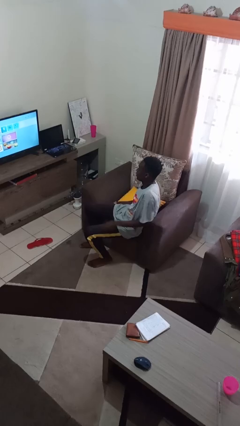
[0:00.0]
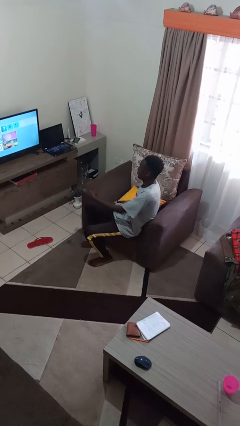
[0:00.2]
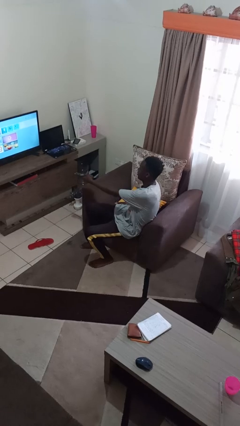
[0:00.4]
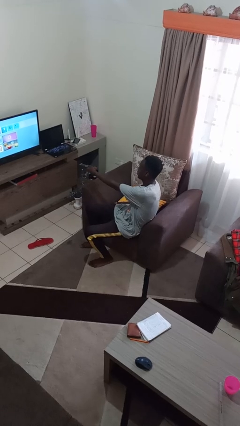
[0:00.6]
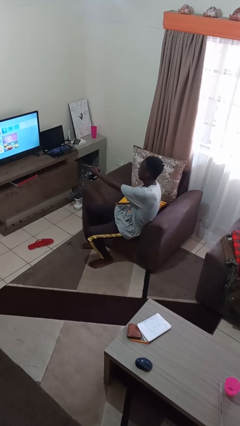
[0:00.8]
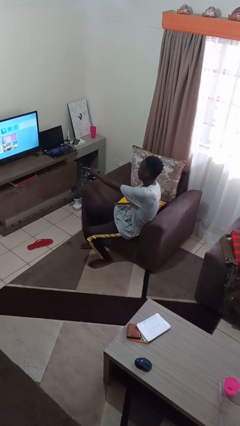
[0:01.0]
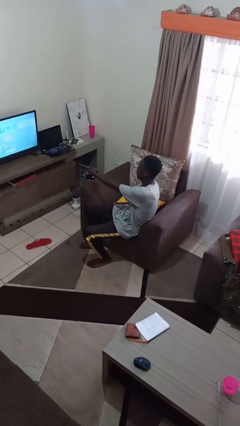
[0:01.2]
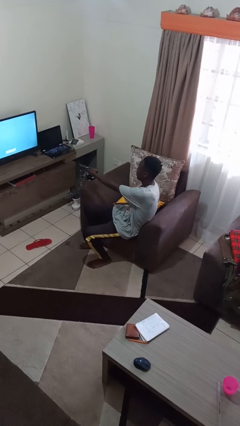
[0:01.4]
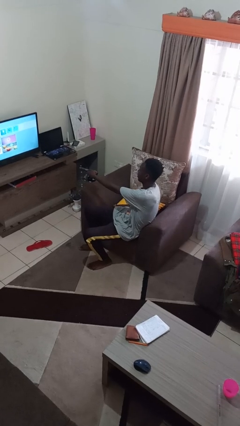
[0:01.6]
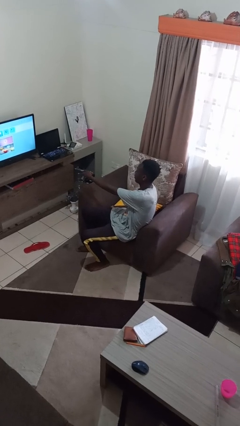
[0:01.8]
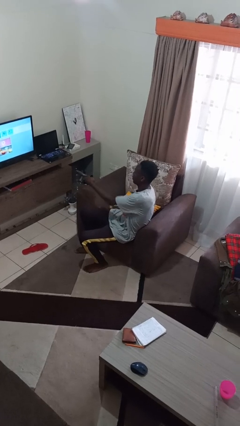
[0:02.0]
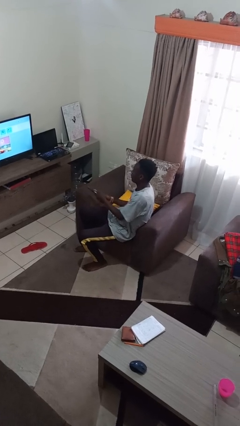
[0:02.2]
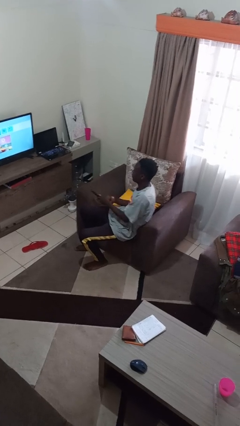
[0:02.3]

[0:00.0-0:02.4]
person uses television remote

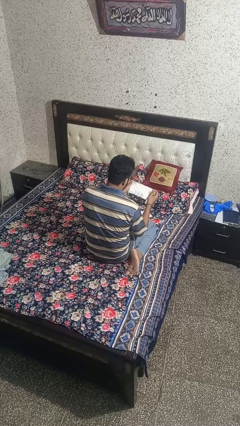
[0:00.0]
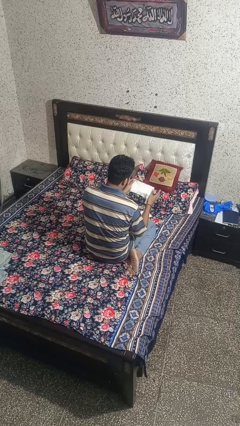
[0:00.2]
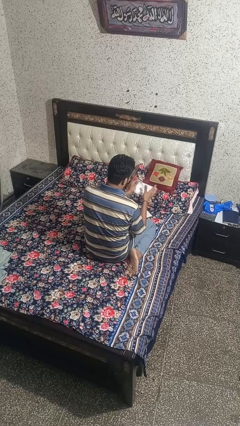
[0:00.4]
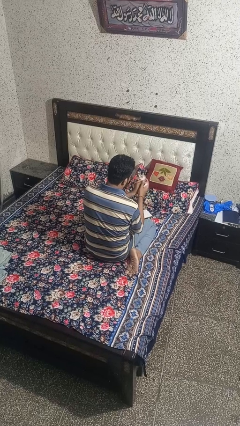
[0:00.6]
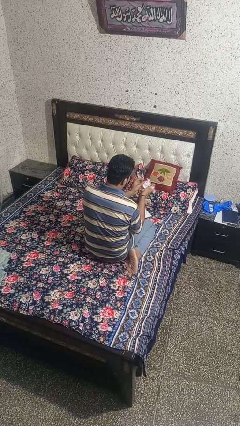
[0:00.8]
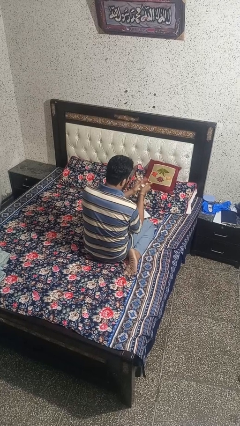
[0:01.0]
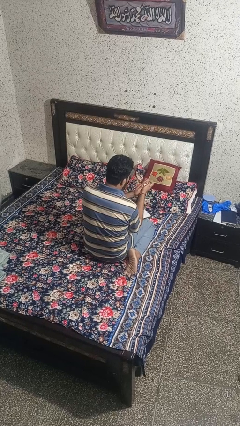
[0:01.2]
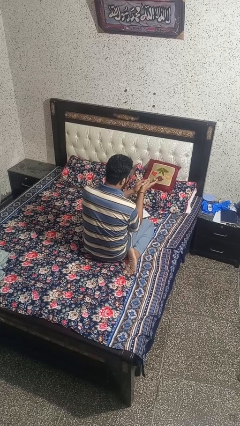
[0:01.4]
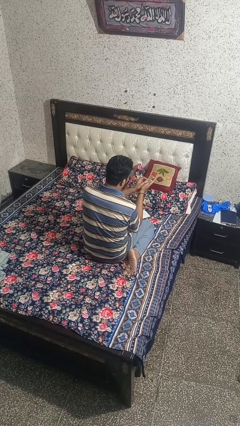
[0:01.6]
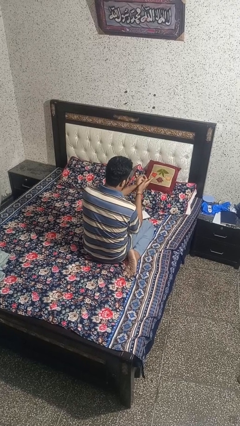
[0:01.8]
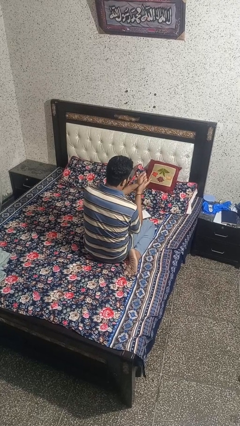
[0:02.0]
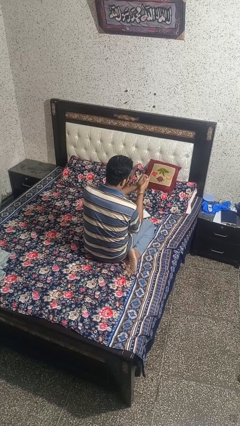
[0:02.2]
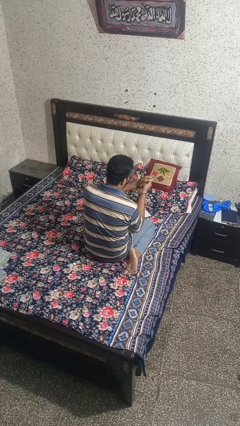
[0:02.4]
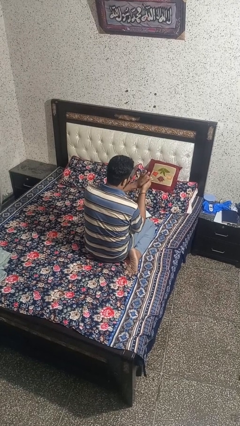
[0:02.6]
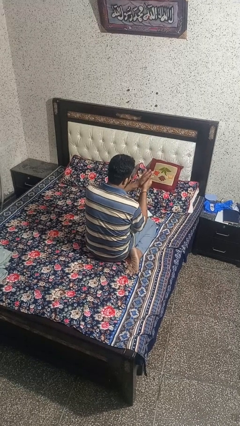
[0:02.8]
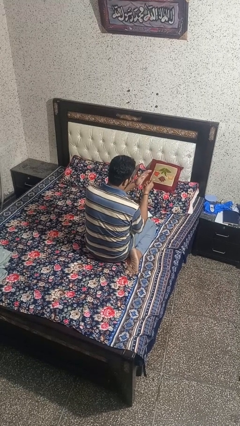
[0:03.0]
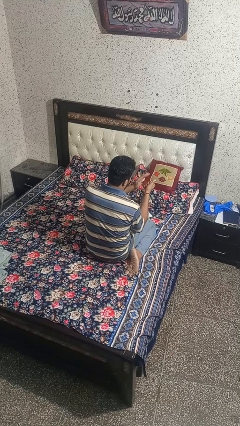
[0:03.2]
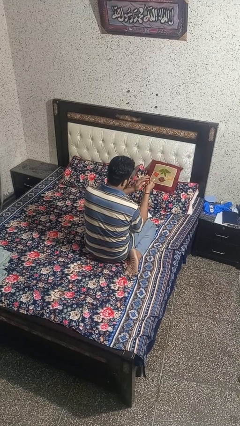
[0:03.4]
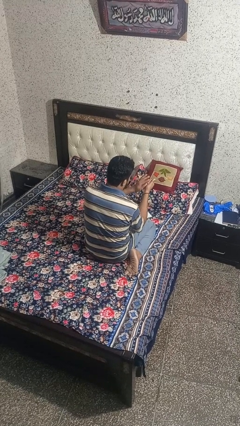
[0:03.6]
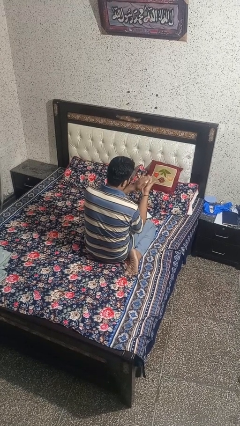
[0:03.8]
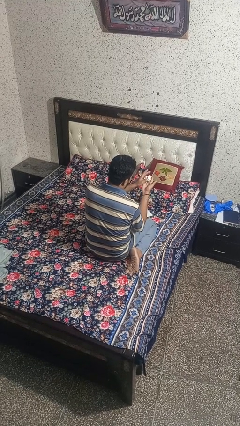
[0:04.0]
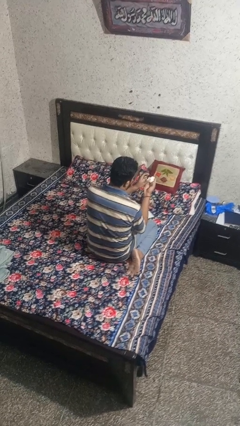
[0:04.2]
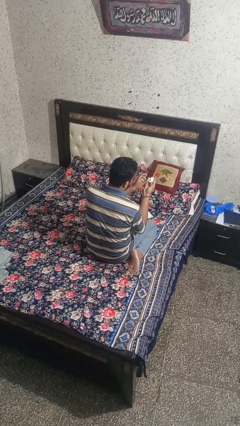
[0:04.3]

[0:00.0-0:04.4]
person crumples paper

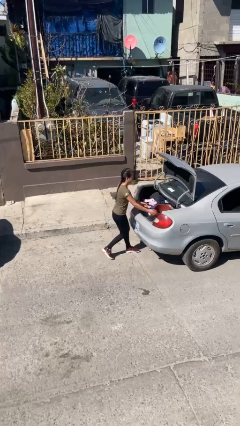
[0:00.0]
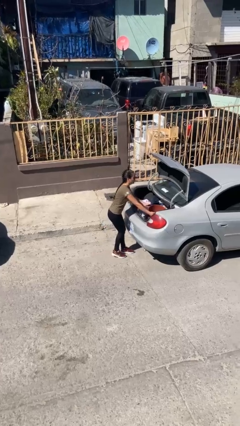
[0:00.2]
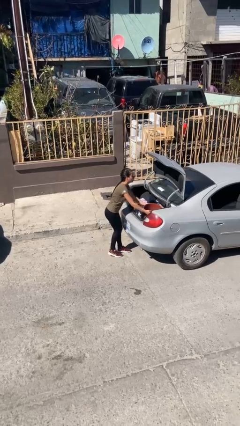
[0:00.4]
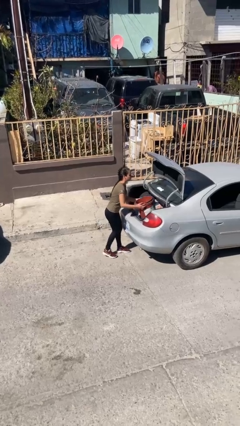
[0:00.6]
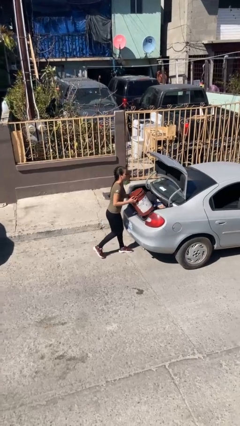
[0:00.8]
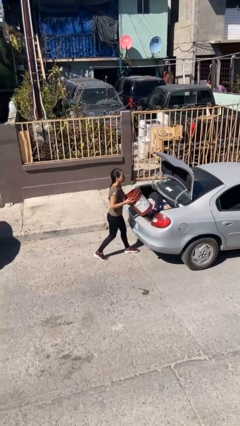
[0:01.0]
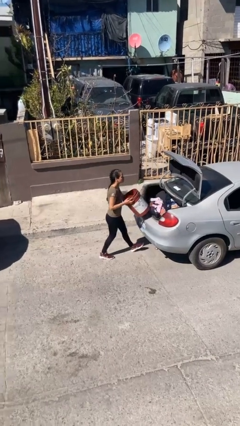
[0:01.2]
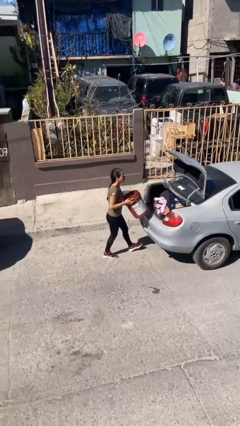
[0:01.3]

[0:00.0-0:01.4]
person unloads car

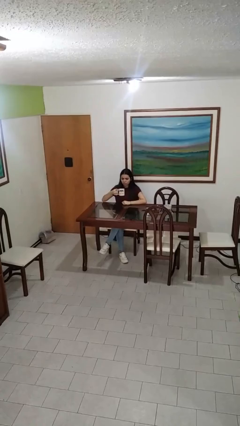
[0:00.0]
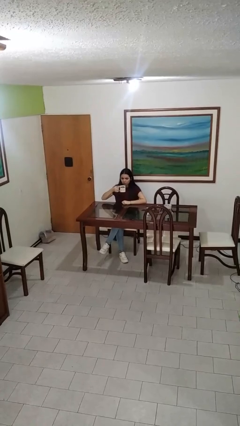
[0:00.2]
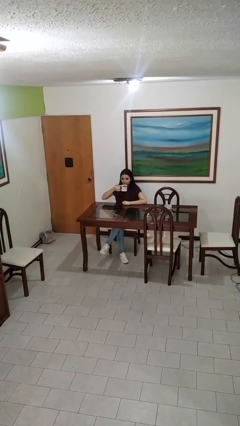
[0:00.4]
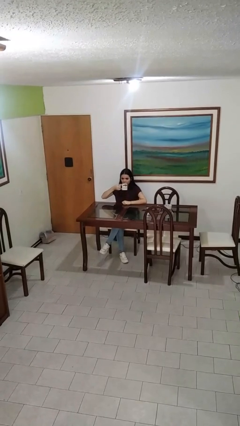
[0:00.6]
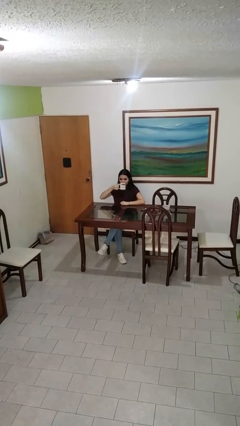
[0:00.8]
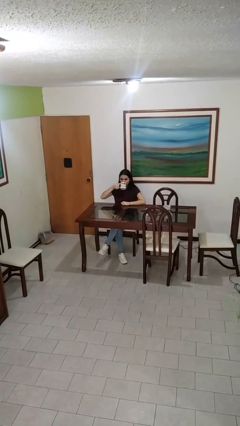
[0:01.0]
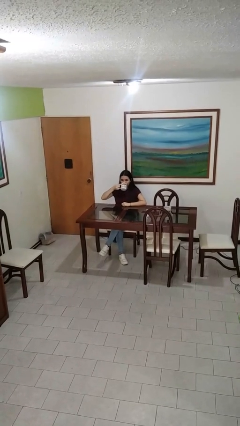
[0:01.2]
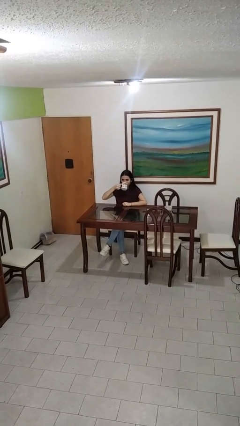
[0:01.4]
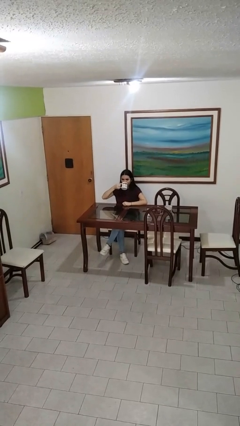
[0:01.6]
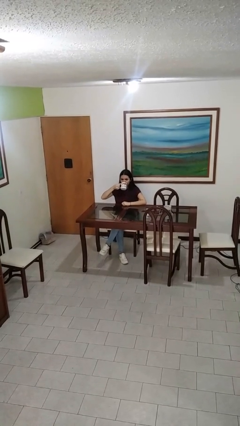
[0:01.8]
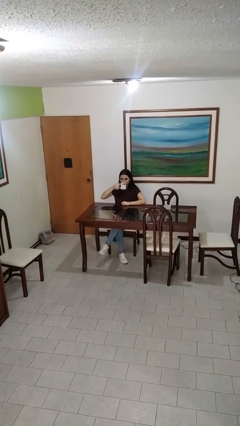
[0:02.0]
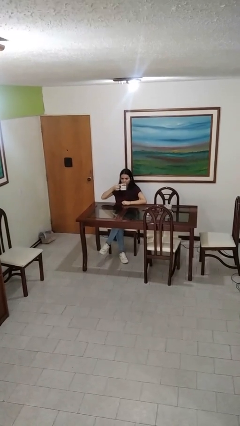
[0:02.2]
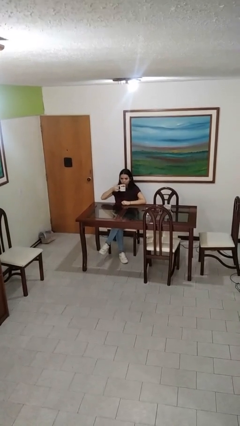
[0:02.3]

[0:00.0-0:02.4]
person drinks from mug

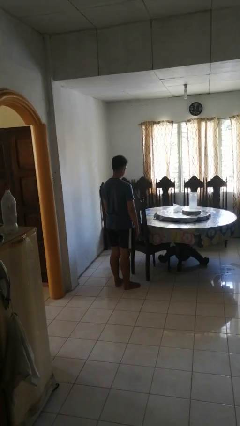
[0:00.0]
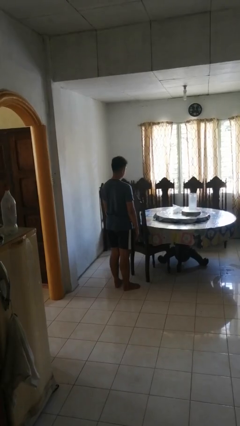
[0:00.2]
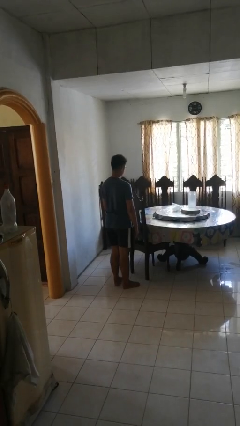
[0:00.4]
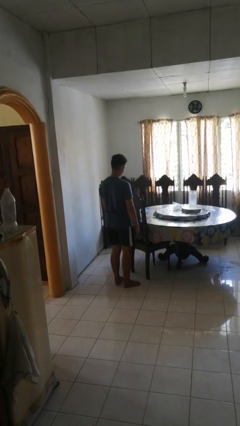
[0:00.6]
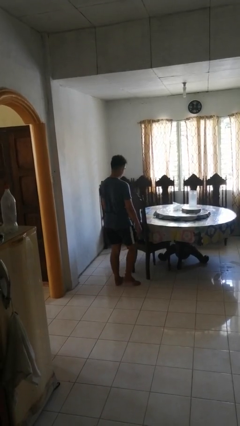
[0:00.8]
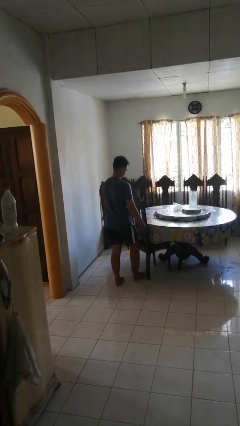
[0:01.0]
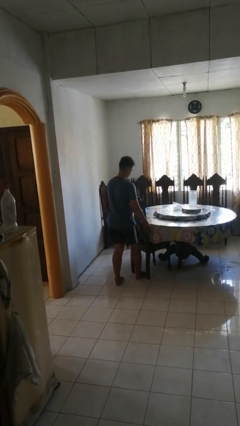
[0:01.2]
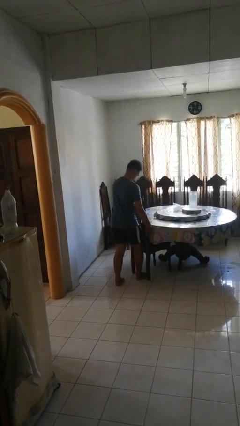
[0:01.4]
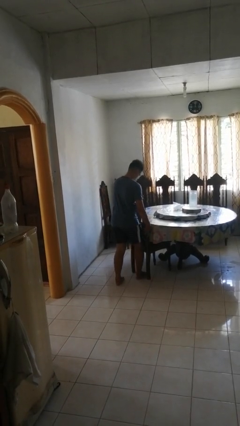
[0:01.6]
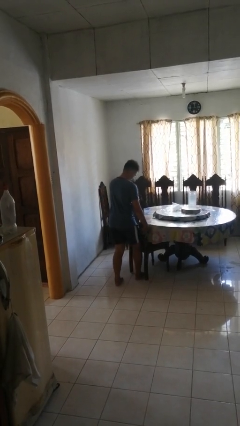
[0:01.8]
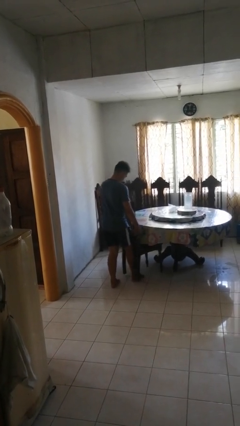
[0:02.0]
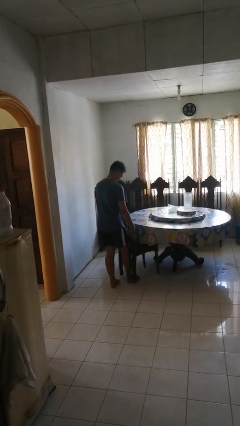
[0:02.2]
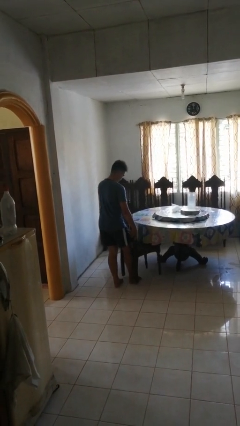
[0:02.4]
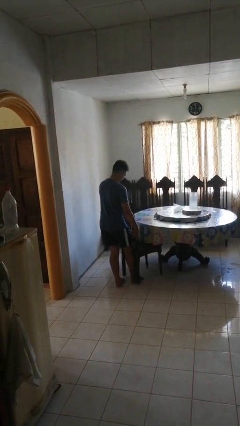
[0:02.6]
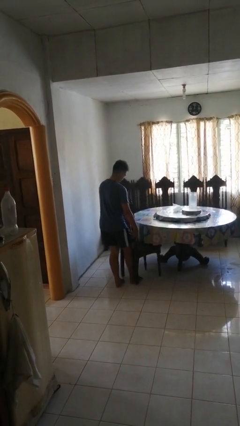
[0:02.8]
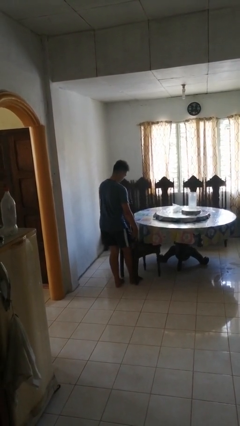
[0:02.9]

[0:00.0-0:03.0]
person pulls out chair

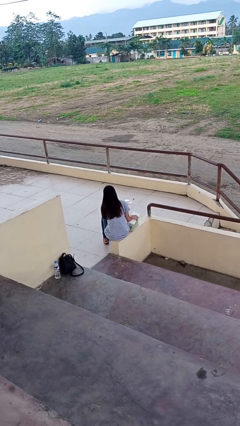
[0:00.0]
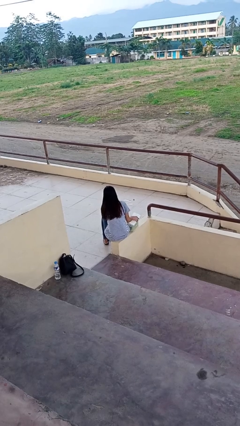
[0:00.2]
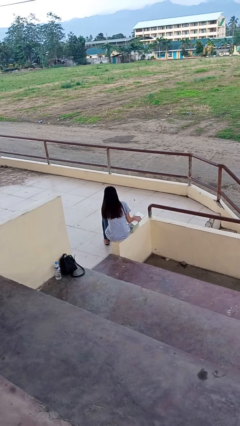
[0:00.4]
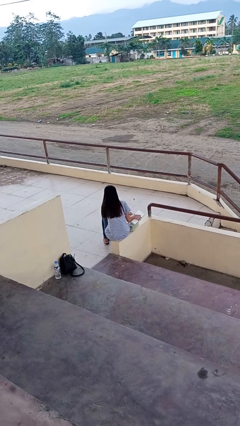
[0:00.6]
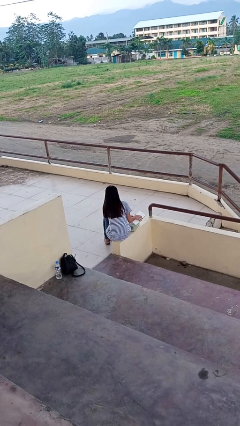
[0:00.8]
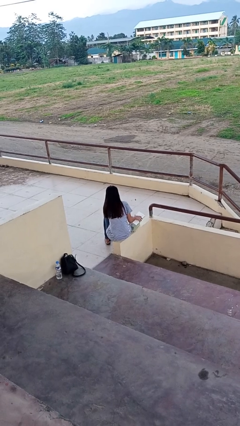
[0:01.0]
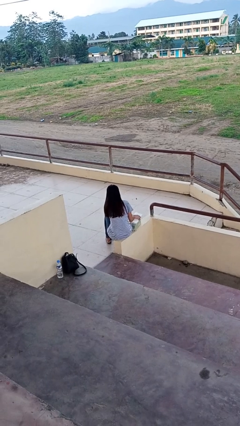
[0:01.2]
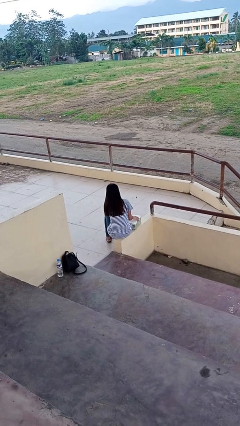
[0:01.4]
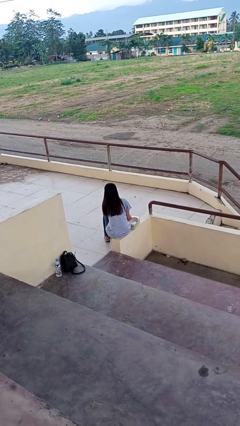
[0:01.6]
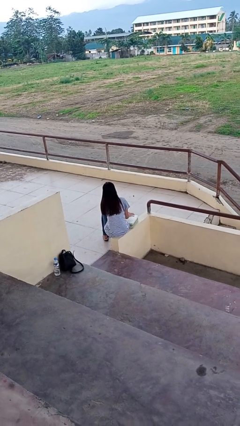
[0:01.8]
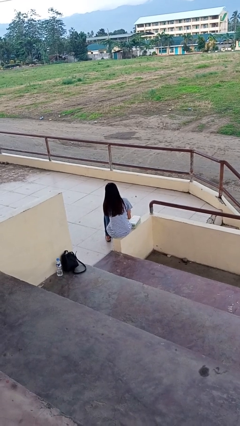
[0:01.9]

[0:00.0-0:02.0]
person puts object into box

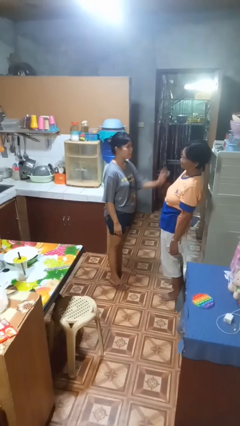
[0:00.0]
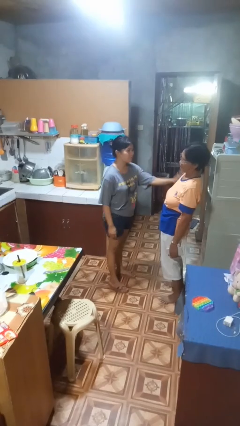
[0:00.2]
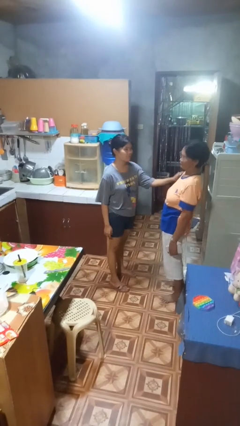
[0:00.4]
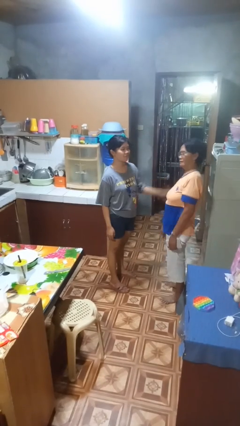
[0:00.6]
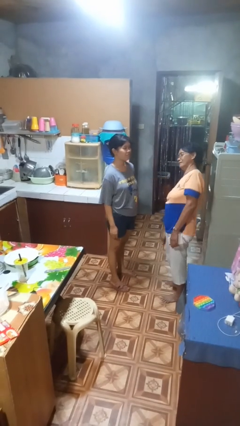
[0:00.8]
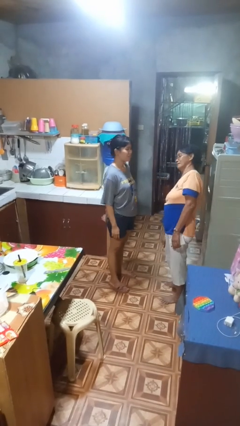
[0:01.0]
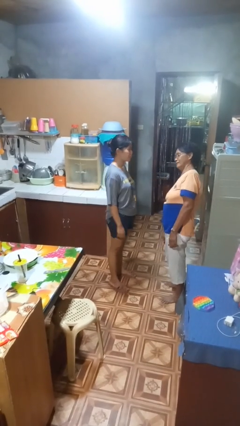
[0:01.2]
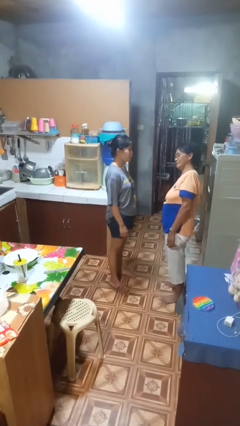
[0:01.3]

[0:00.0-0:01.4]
person shoves person

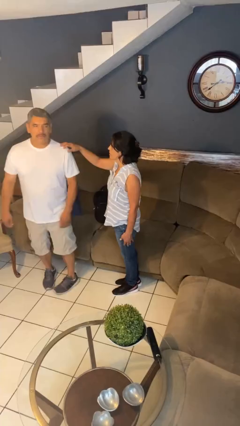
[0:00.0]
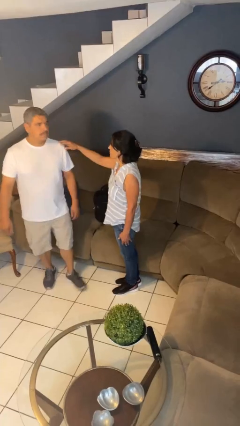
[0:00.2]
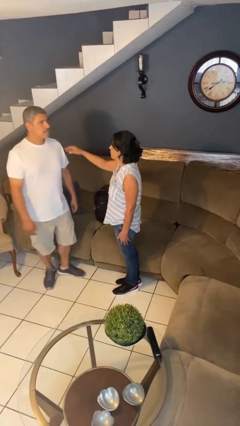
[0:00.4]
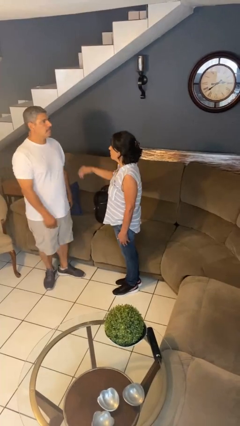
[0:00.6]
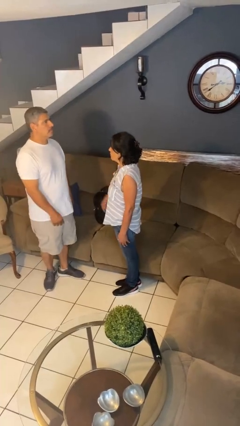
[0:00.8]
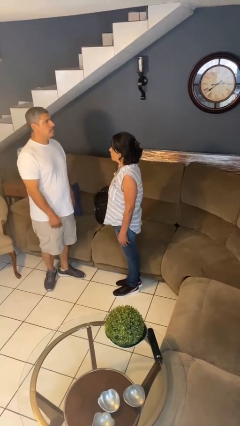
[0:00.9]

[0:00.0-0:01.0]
person spins person around
